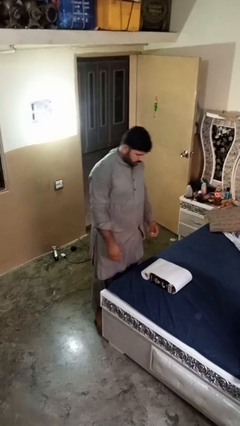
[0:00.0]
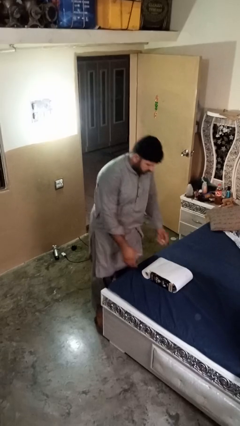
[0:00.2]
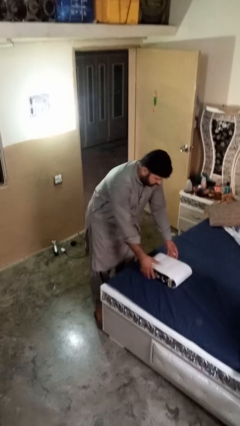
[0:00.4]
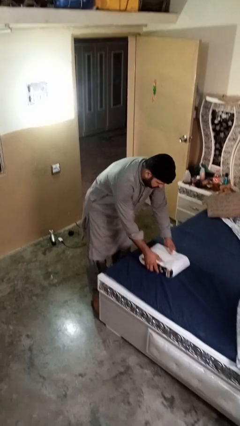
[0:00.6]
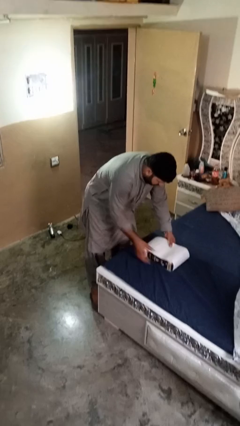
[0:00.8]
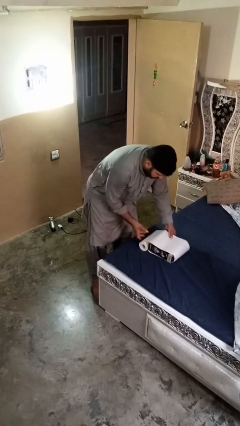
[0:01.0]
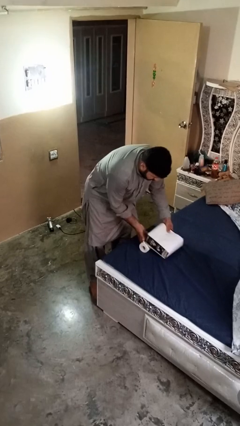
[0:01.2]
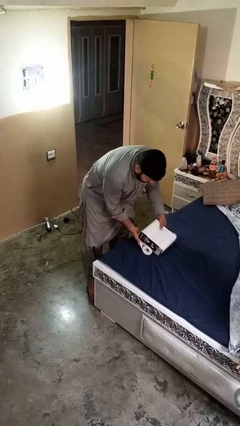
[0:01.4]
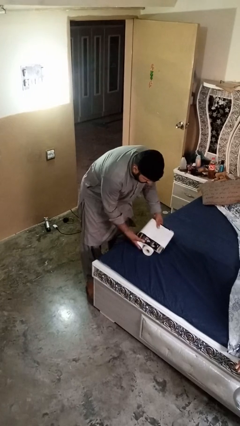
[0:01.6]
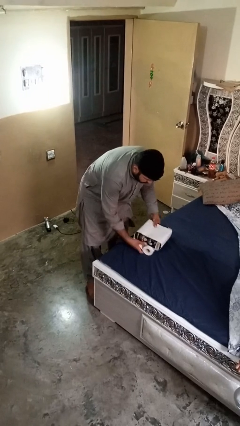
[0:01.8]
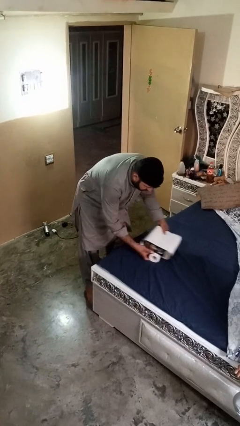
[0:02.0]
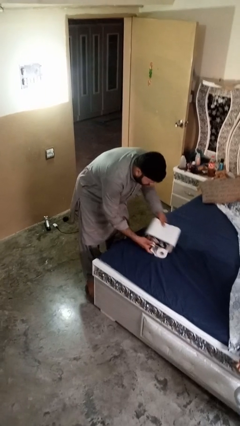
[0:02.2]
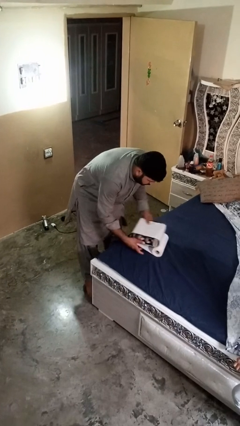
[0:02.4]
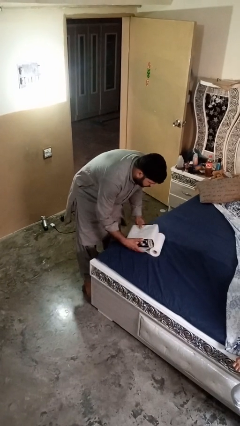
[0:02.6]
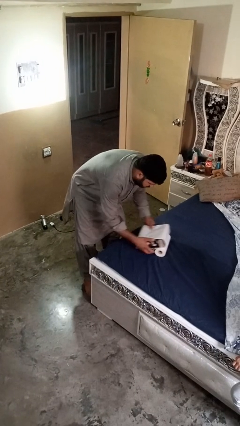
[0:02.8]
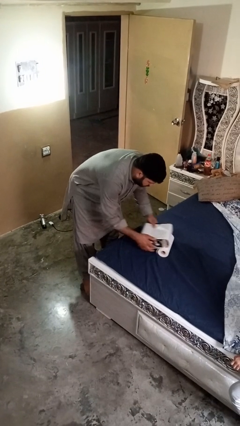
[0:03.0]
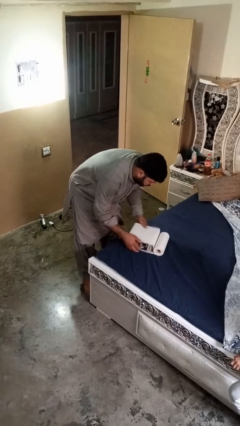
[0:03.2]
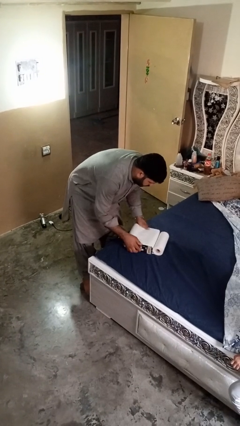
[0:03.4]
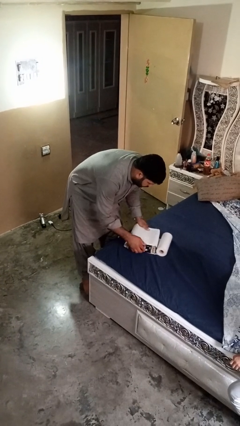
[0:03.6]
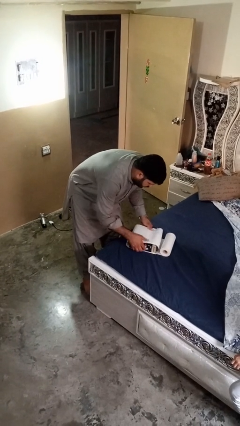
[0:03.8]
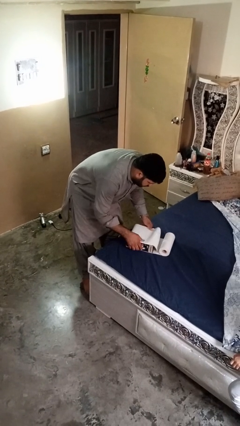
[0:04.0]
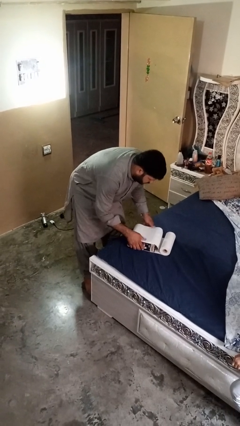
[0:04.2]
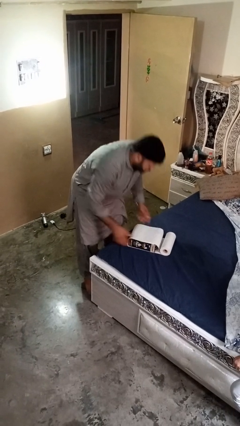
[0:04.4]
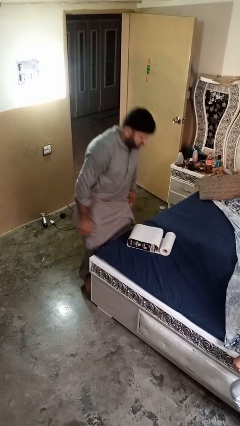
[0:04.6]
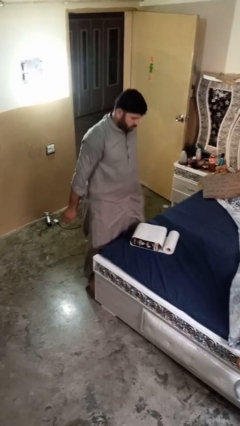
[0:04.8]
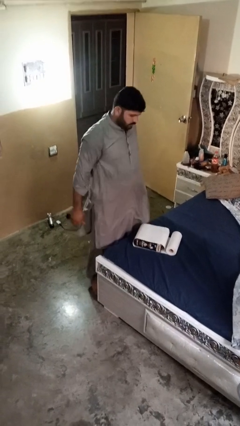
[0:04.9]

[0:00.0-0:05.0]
person wraps box

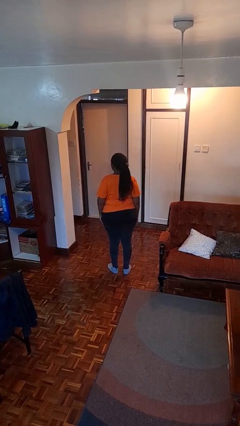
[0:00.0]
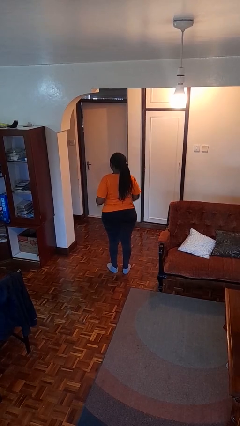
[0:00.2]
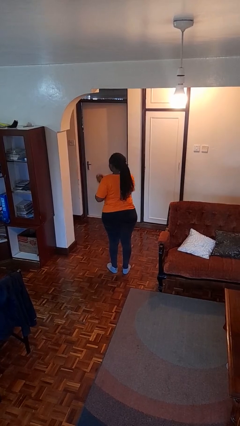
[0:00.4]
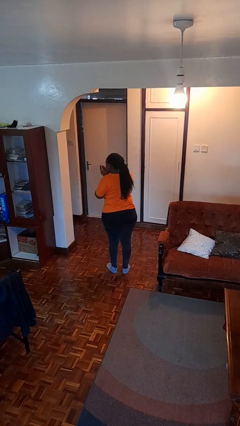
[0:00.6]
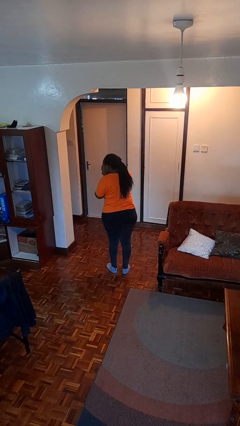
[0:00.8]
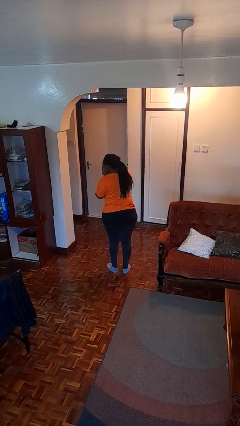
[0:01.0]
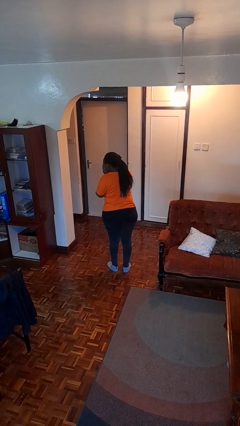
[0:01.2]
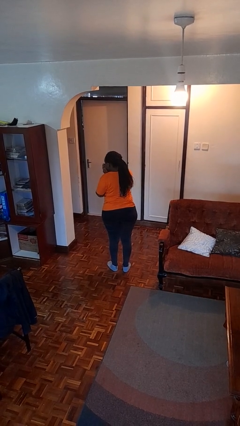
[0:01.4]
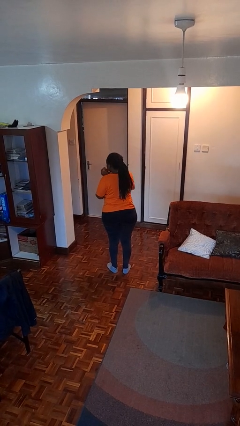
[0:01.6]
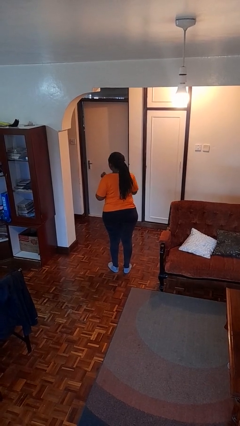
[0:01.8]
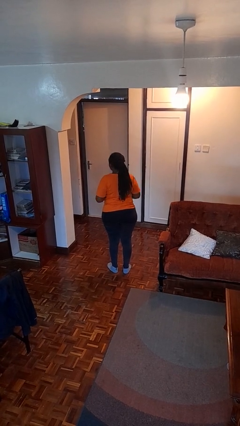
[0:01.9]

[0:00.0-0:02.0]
person sneezes into hand

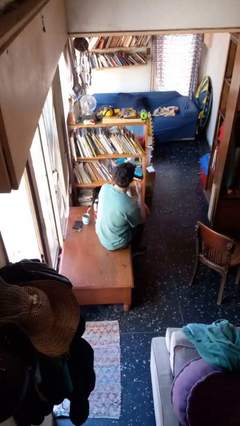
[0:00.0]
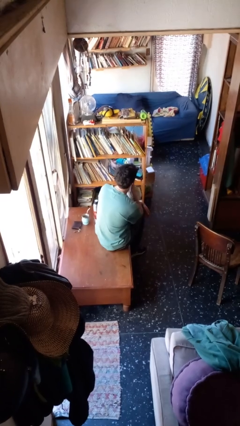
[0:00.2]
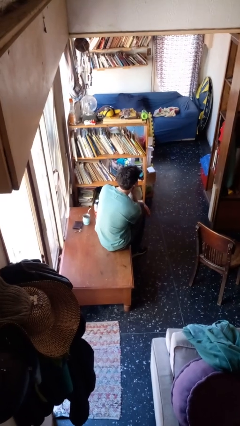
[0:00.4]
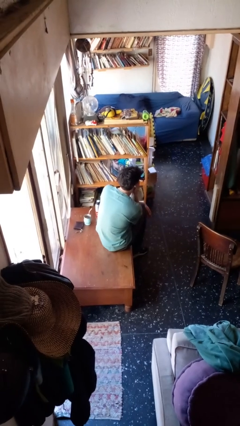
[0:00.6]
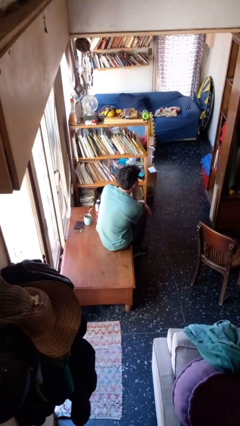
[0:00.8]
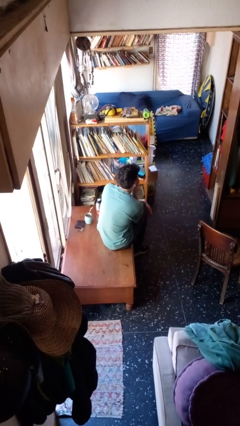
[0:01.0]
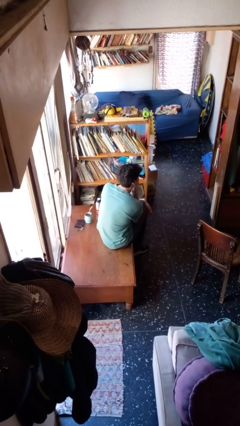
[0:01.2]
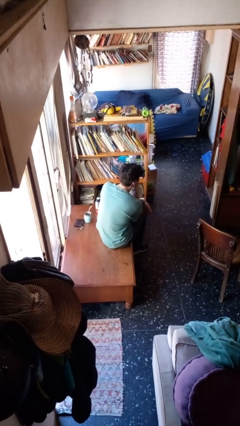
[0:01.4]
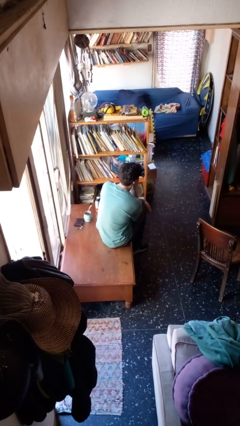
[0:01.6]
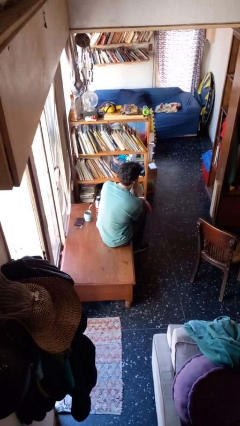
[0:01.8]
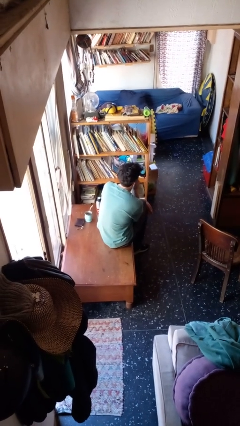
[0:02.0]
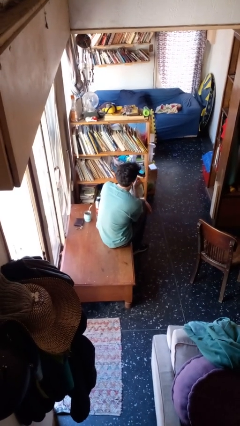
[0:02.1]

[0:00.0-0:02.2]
person strokes chin

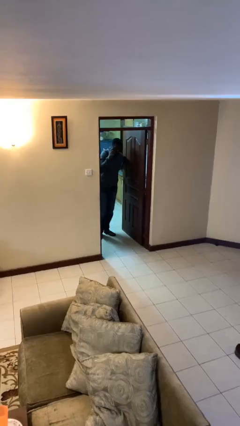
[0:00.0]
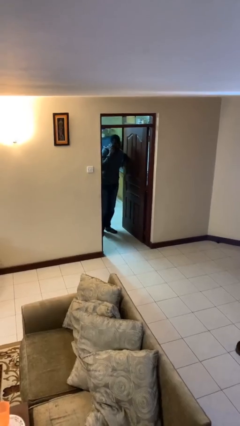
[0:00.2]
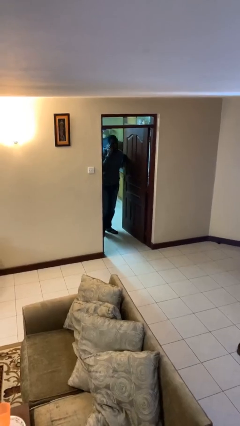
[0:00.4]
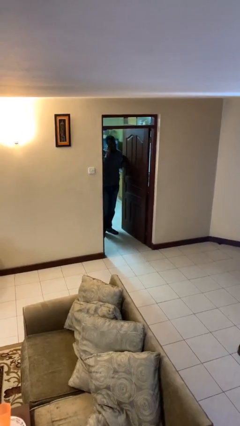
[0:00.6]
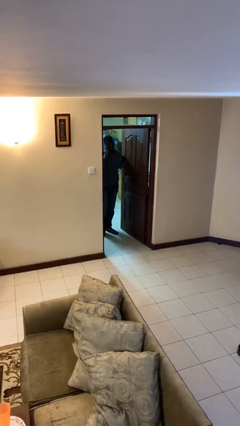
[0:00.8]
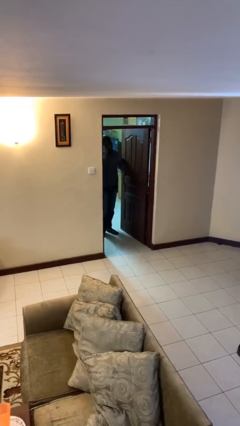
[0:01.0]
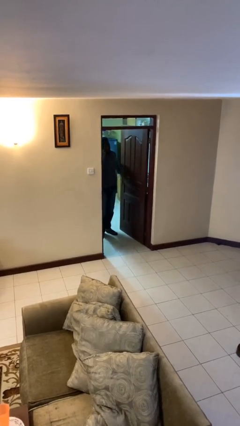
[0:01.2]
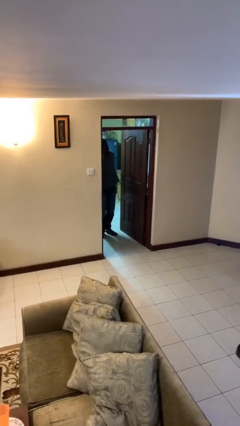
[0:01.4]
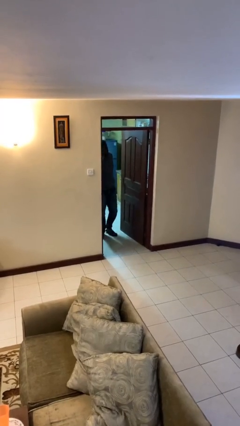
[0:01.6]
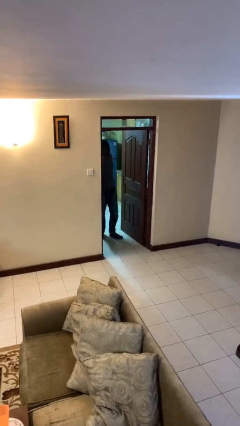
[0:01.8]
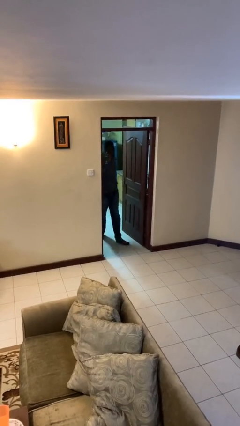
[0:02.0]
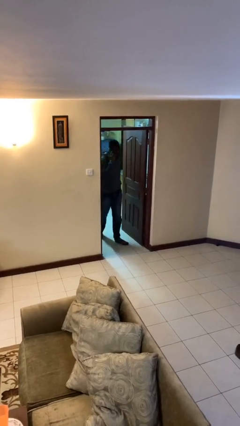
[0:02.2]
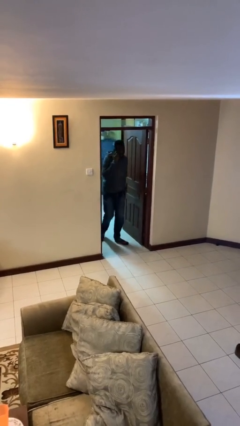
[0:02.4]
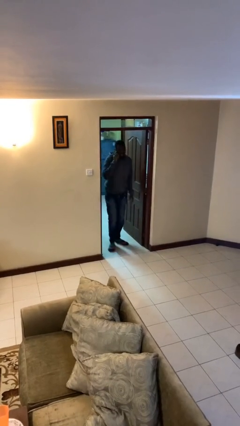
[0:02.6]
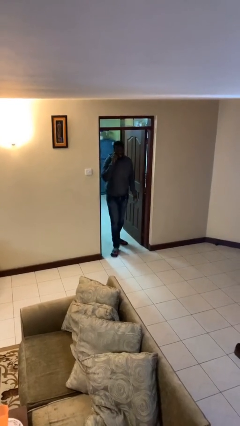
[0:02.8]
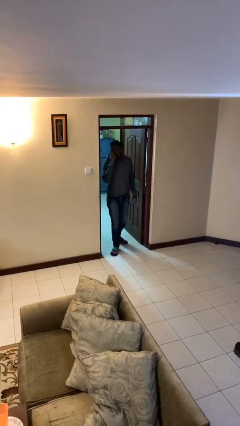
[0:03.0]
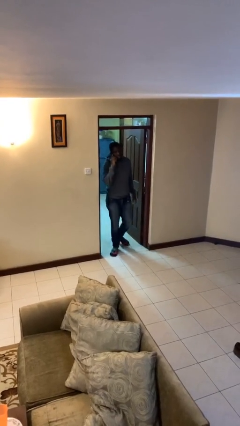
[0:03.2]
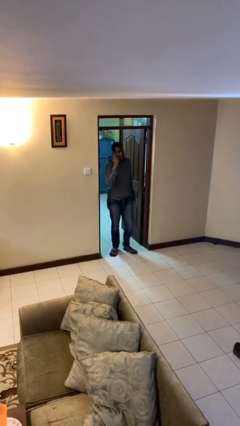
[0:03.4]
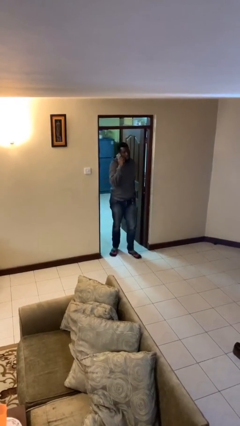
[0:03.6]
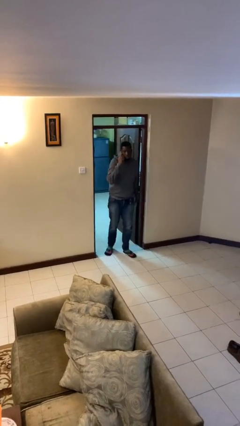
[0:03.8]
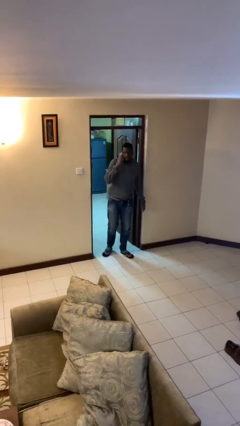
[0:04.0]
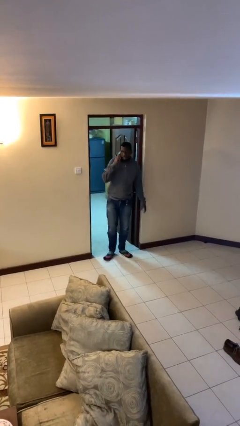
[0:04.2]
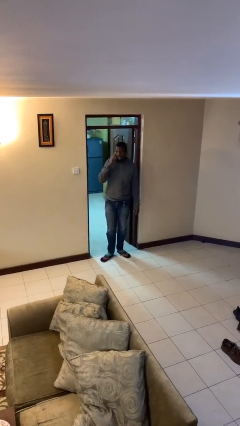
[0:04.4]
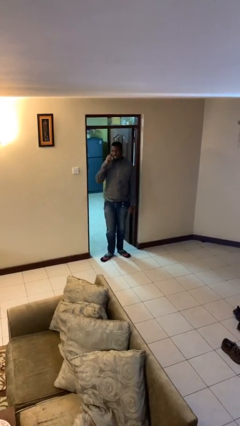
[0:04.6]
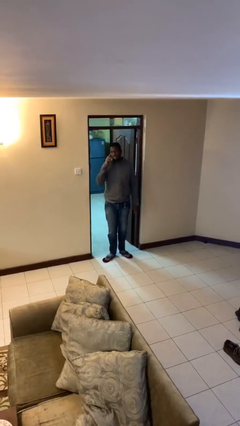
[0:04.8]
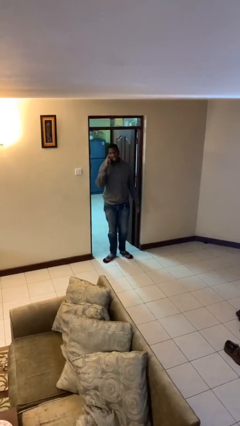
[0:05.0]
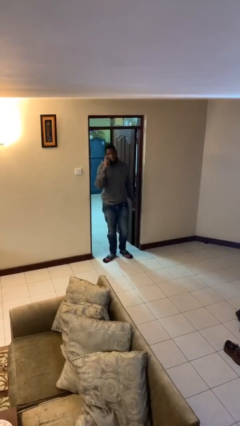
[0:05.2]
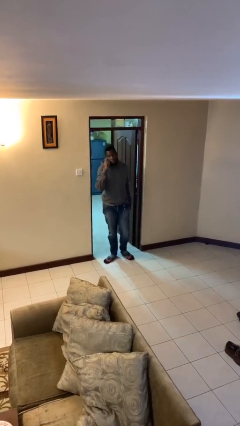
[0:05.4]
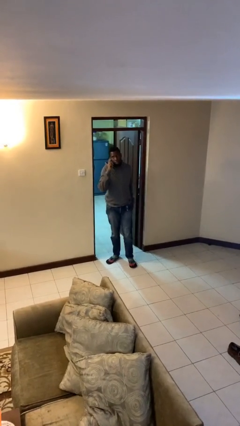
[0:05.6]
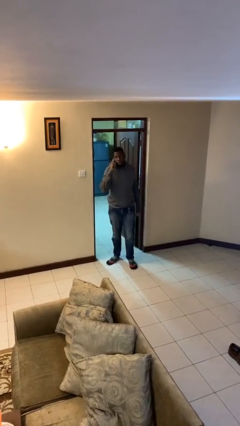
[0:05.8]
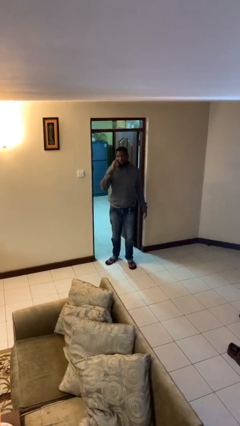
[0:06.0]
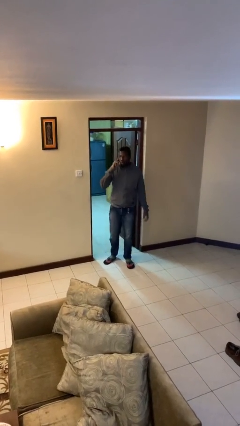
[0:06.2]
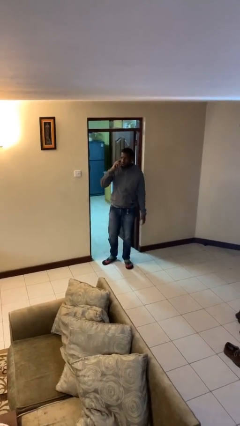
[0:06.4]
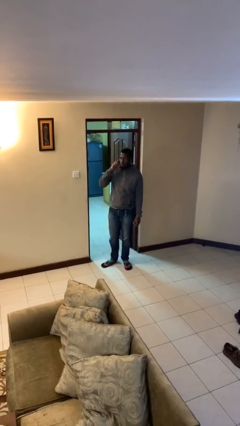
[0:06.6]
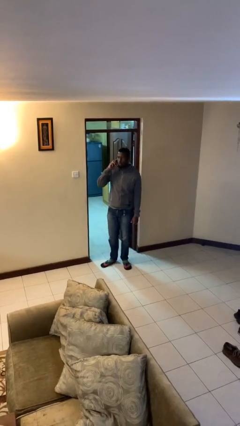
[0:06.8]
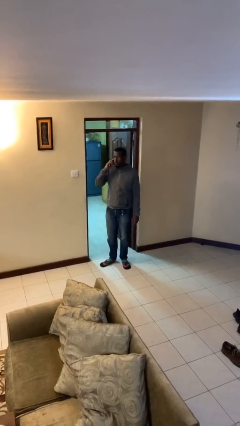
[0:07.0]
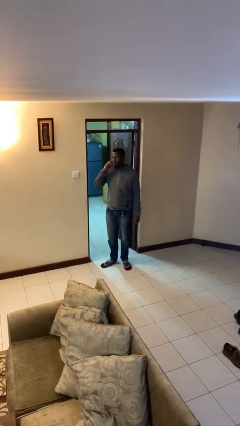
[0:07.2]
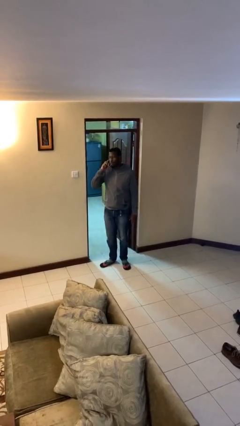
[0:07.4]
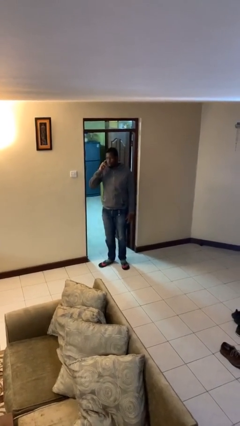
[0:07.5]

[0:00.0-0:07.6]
person enters scene through structure

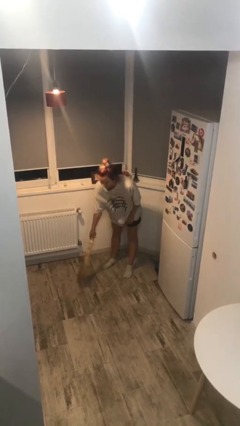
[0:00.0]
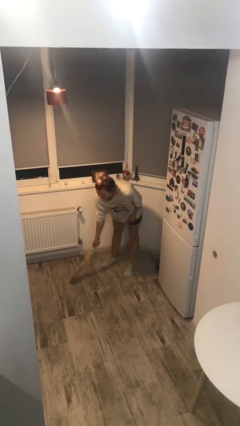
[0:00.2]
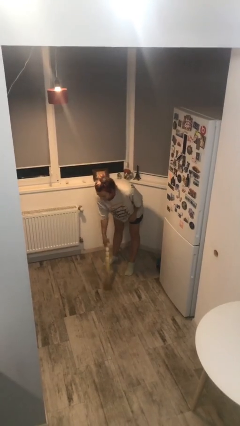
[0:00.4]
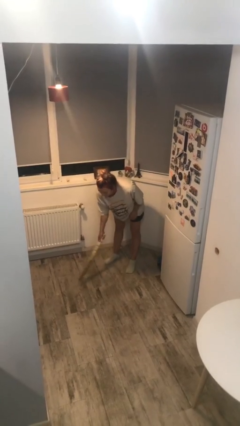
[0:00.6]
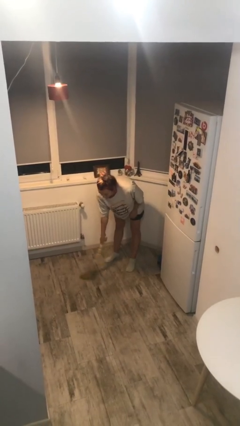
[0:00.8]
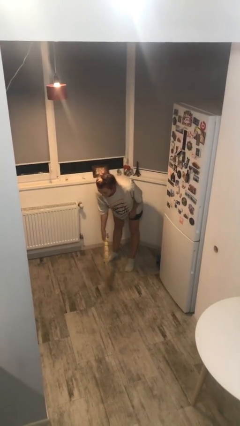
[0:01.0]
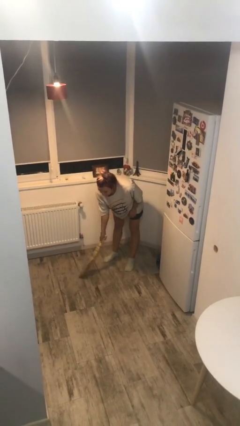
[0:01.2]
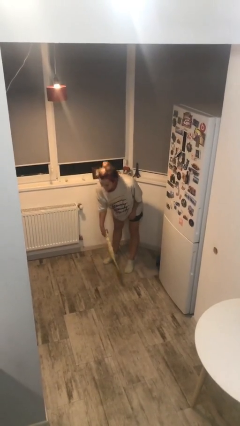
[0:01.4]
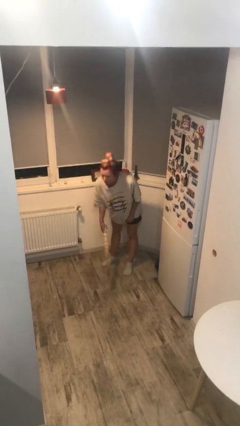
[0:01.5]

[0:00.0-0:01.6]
person sweeps floor
